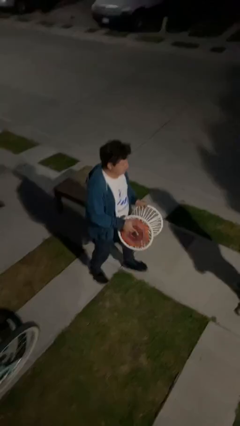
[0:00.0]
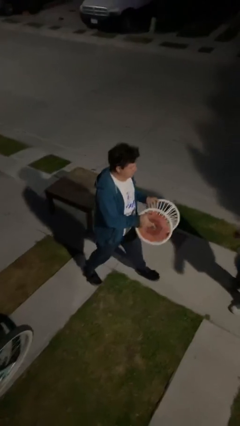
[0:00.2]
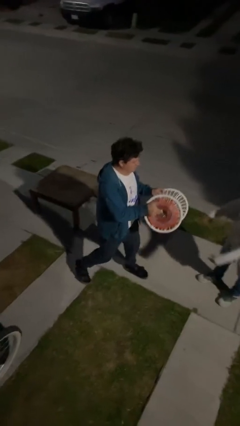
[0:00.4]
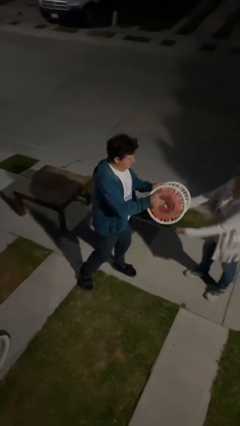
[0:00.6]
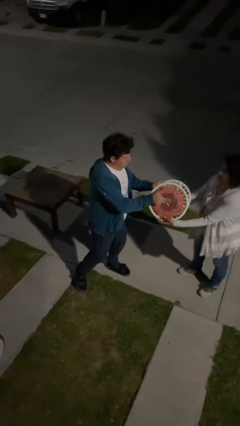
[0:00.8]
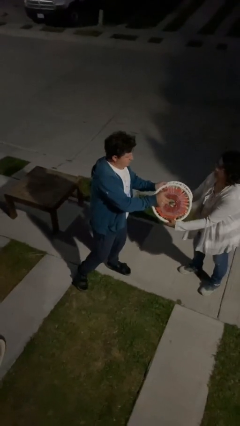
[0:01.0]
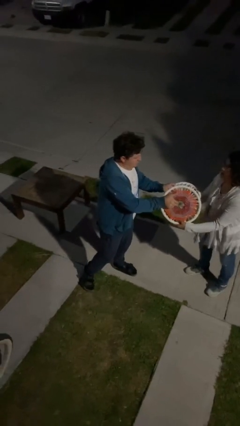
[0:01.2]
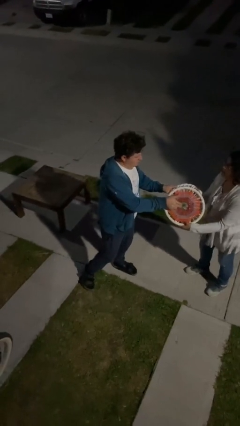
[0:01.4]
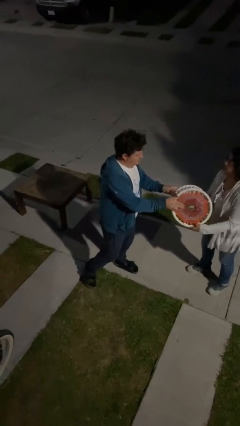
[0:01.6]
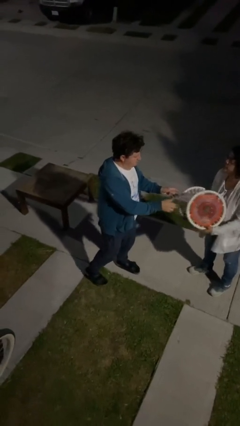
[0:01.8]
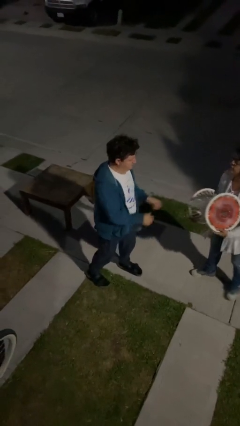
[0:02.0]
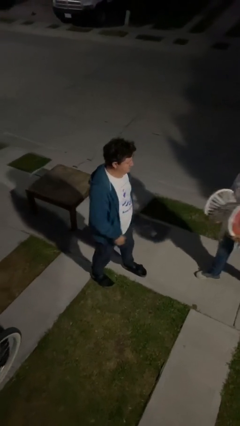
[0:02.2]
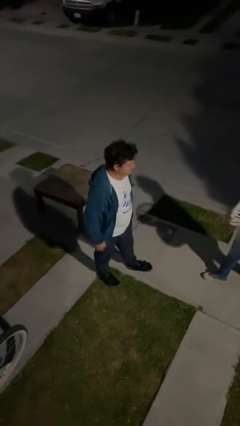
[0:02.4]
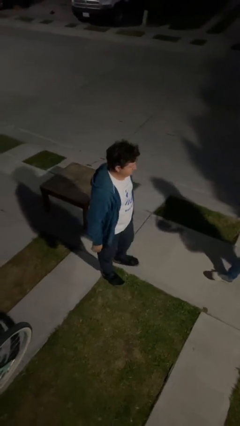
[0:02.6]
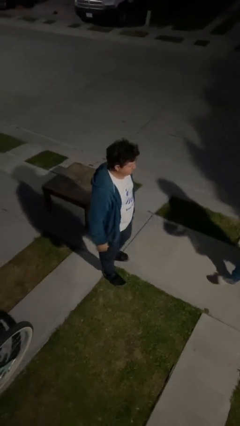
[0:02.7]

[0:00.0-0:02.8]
person transfers object to person

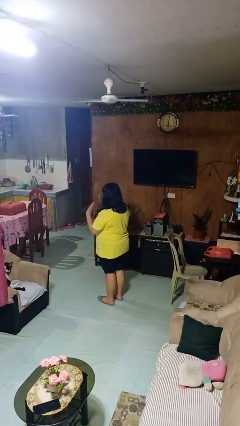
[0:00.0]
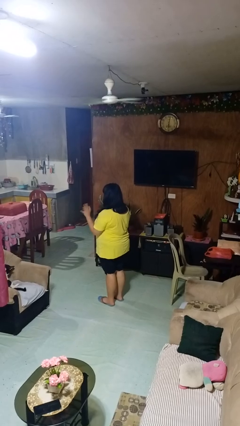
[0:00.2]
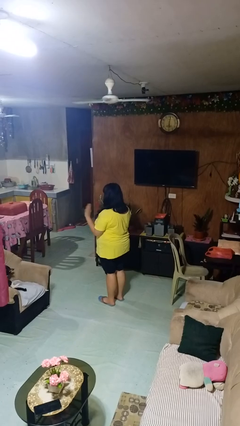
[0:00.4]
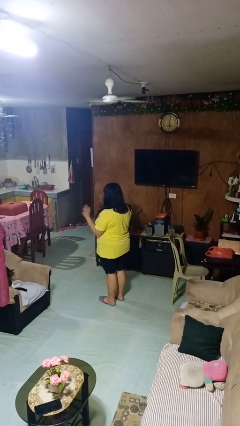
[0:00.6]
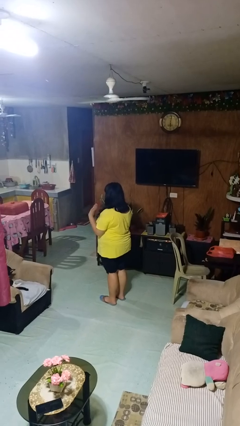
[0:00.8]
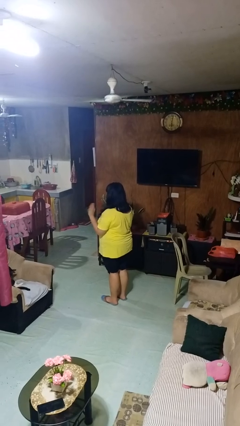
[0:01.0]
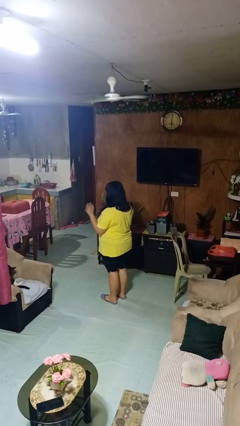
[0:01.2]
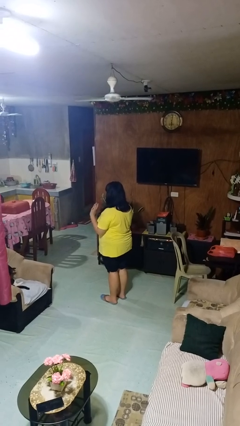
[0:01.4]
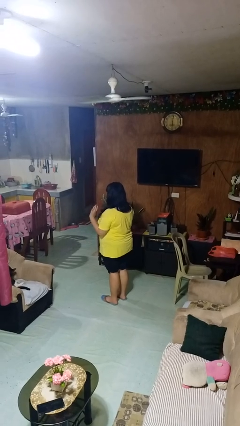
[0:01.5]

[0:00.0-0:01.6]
person waves at person

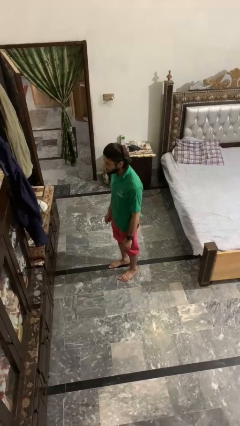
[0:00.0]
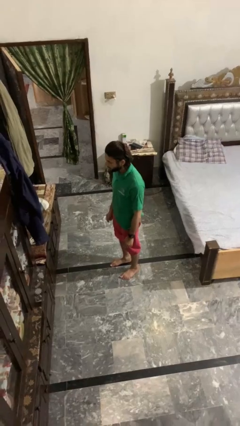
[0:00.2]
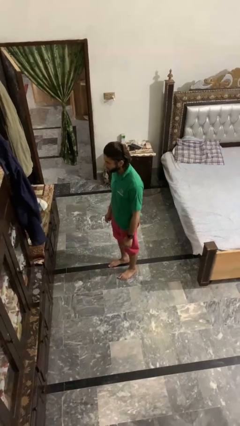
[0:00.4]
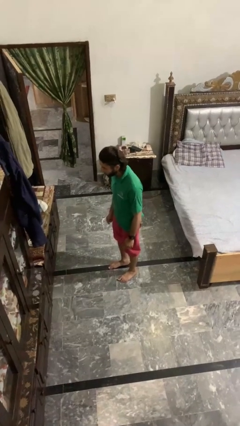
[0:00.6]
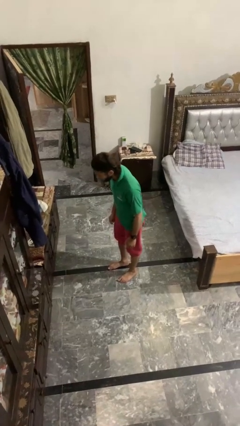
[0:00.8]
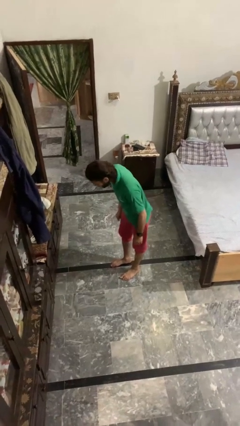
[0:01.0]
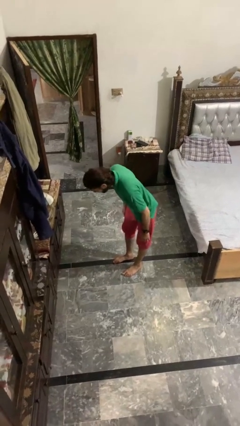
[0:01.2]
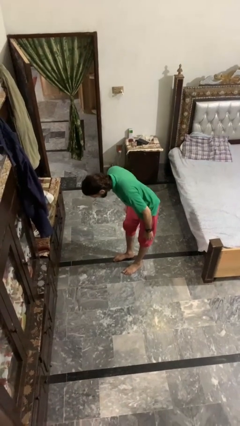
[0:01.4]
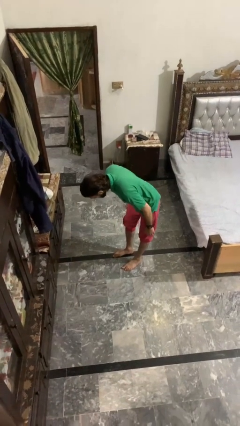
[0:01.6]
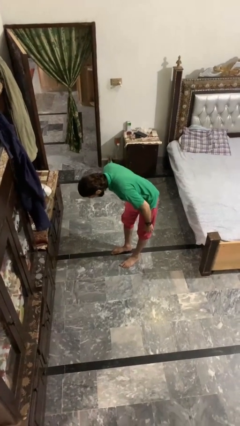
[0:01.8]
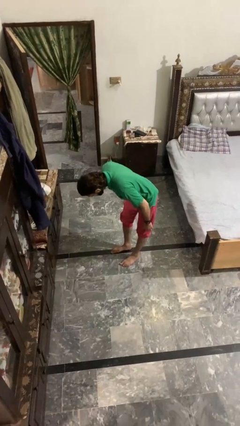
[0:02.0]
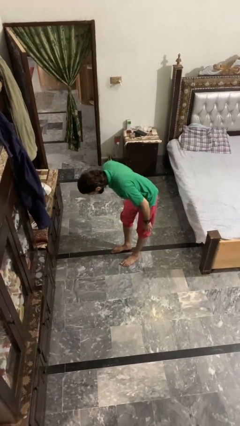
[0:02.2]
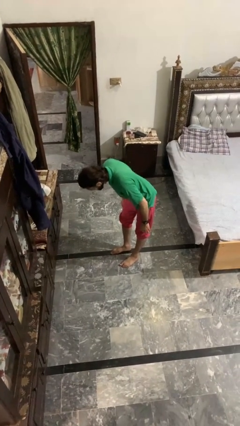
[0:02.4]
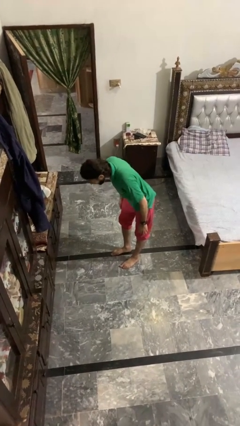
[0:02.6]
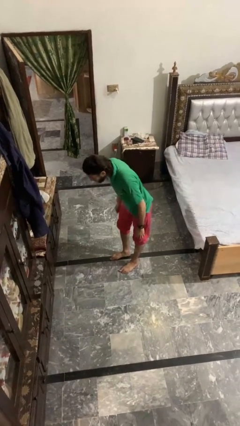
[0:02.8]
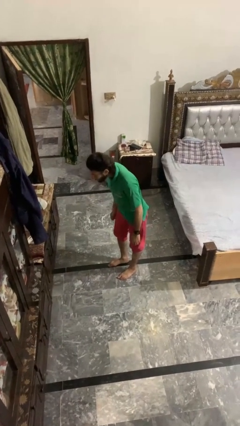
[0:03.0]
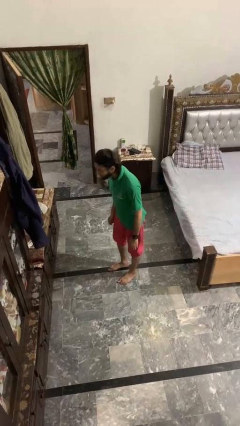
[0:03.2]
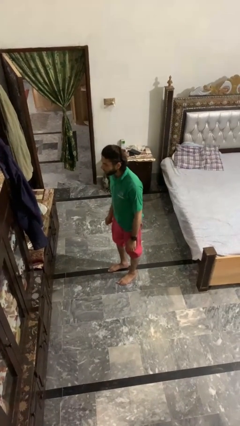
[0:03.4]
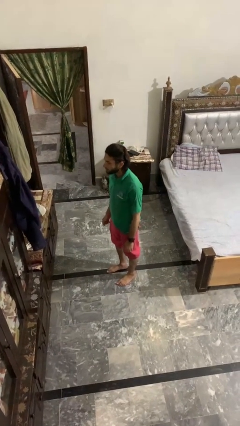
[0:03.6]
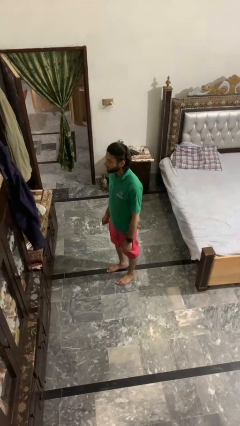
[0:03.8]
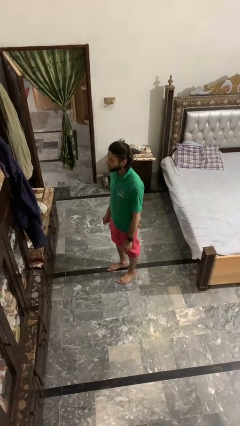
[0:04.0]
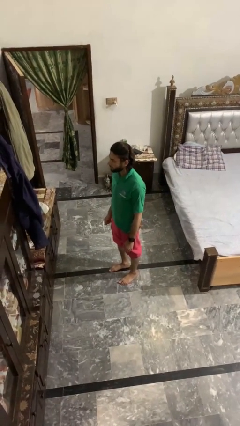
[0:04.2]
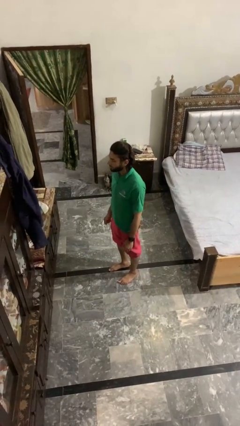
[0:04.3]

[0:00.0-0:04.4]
person bows

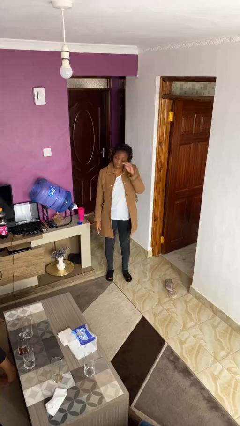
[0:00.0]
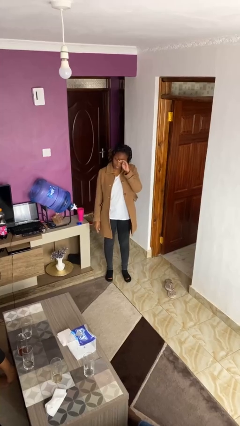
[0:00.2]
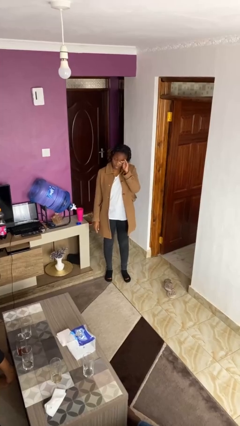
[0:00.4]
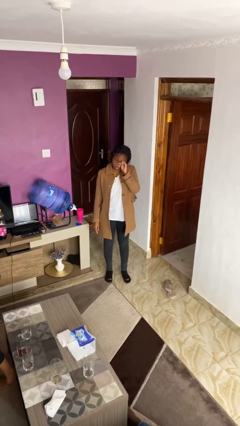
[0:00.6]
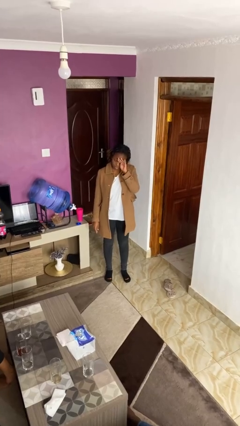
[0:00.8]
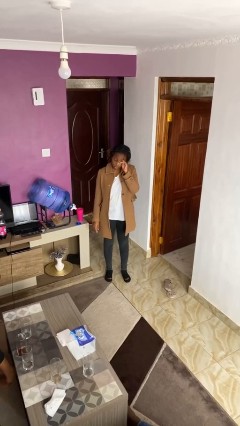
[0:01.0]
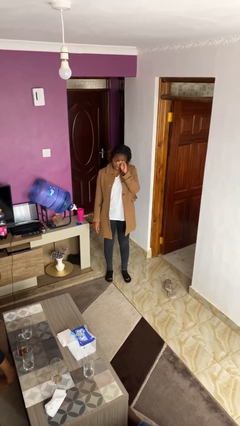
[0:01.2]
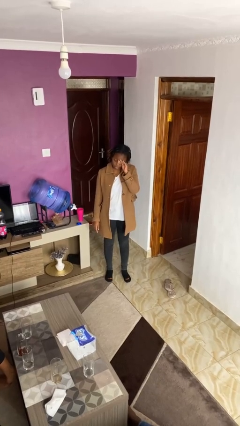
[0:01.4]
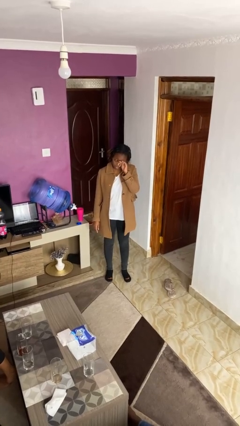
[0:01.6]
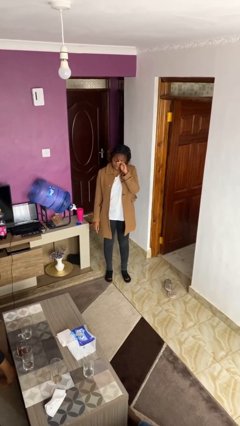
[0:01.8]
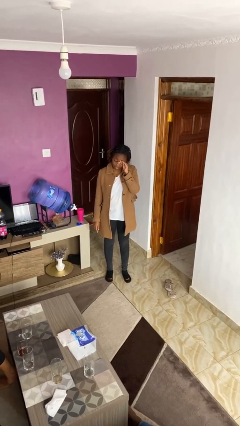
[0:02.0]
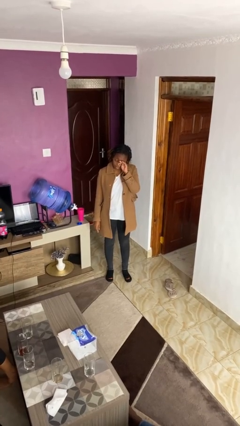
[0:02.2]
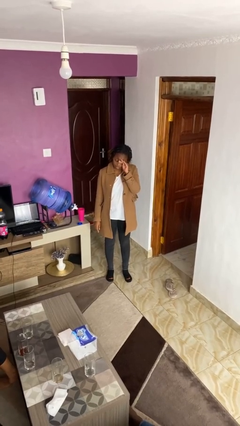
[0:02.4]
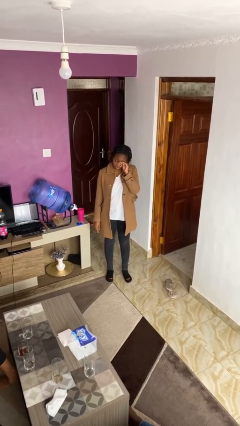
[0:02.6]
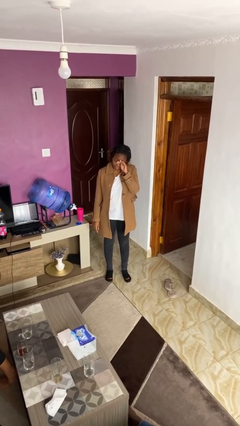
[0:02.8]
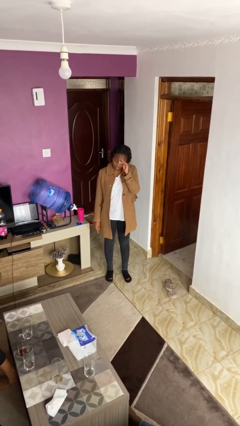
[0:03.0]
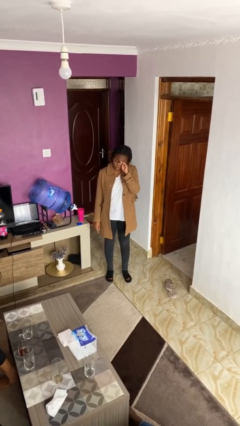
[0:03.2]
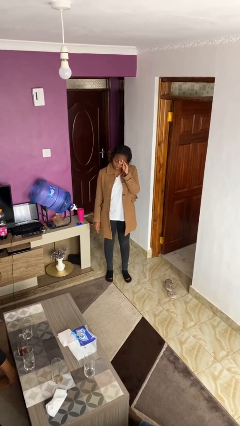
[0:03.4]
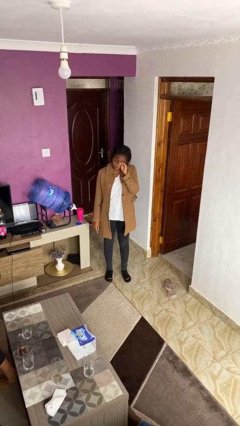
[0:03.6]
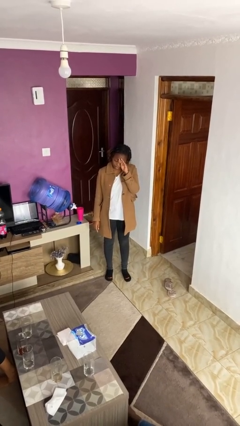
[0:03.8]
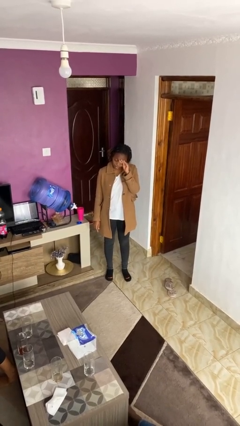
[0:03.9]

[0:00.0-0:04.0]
person scratches face

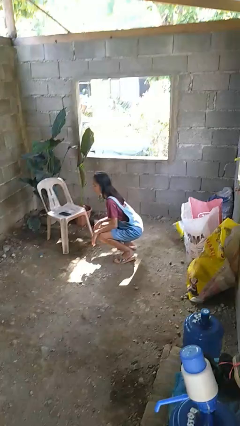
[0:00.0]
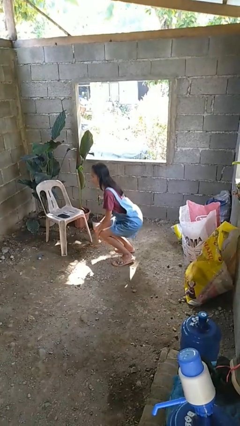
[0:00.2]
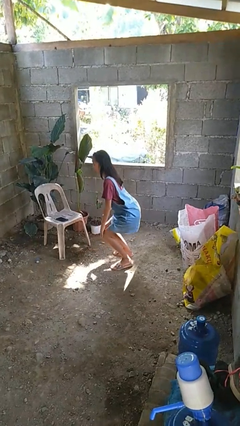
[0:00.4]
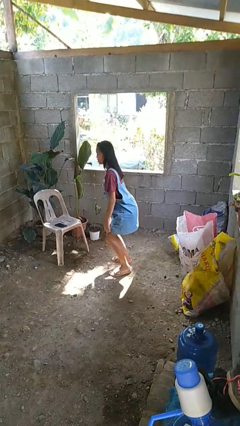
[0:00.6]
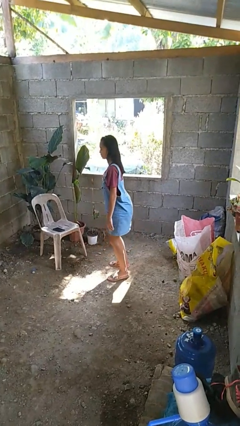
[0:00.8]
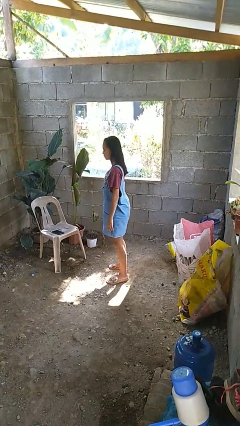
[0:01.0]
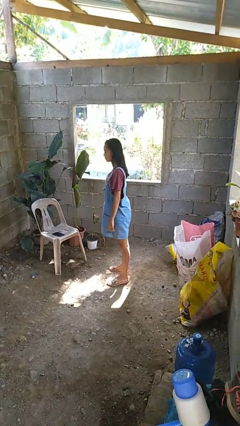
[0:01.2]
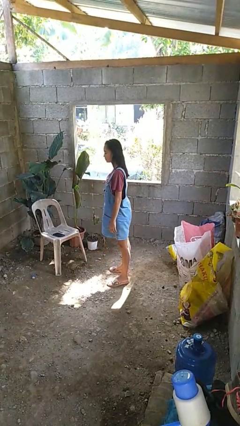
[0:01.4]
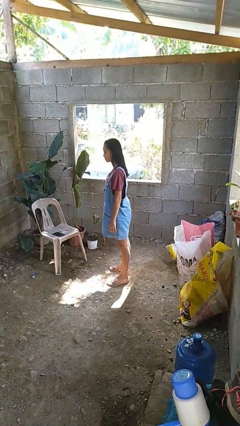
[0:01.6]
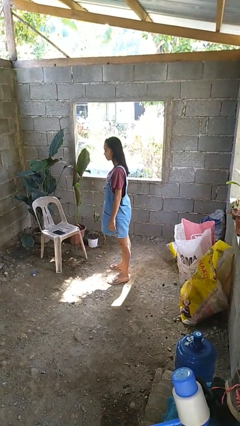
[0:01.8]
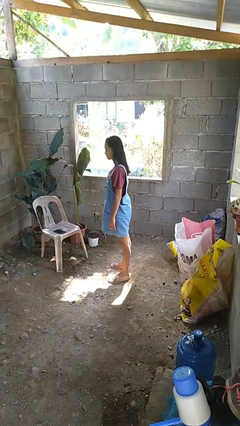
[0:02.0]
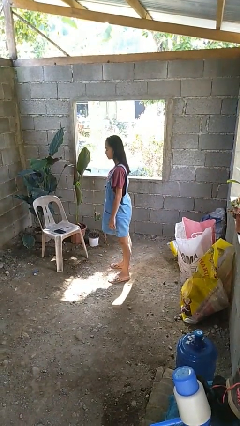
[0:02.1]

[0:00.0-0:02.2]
person stands up

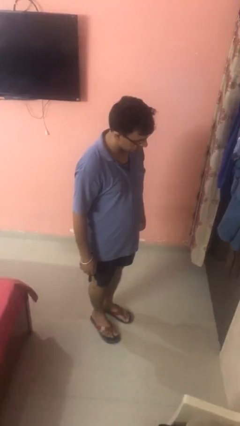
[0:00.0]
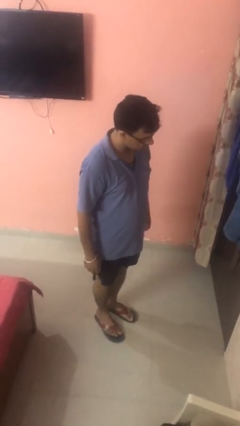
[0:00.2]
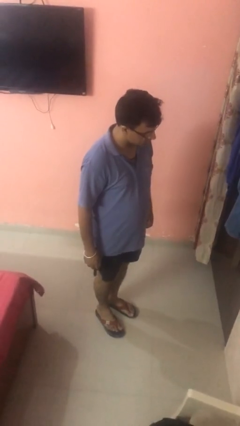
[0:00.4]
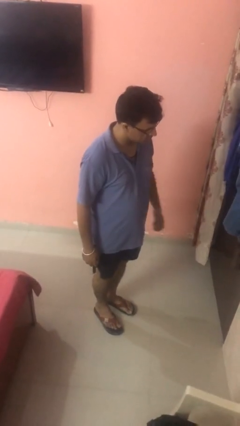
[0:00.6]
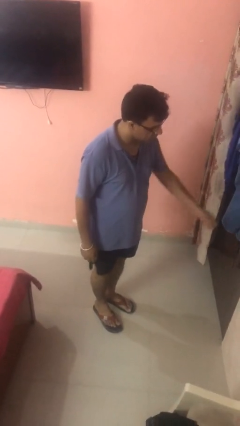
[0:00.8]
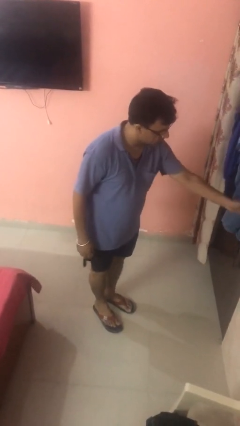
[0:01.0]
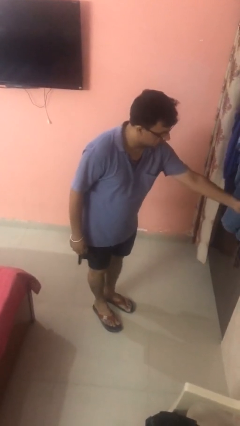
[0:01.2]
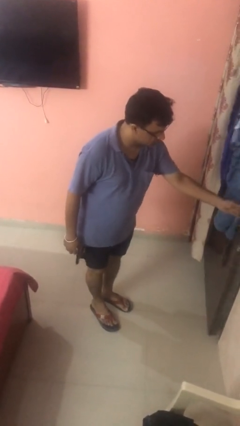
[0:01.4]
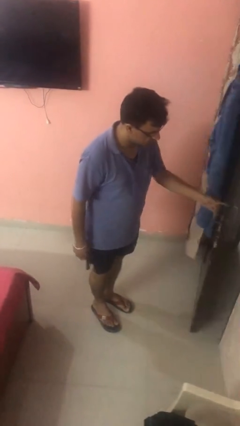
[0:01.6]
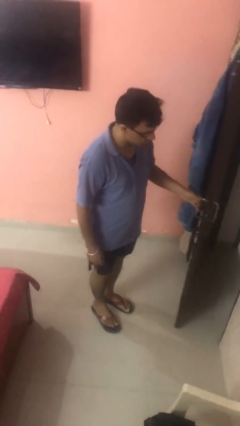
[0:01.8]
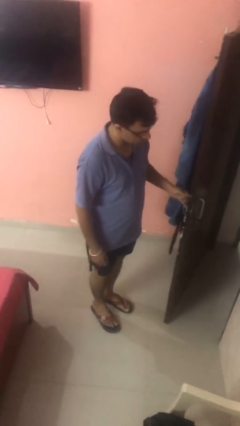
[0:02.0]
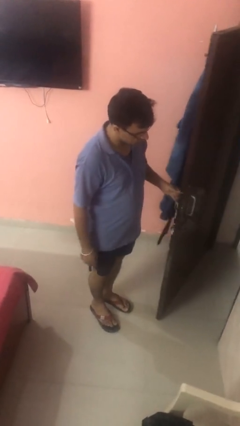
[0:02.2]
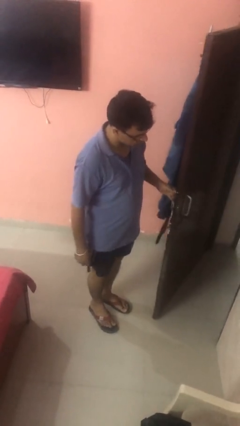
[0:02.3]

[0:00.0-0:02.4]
person opens facility door
